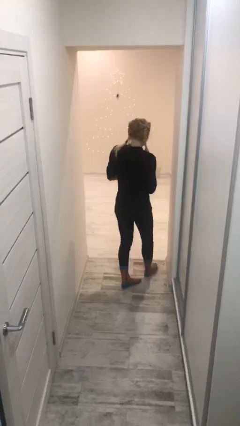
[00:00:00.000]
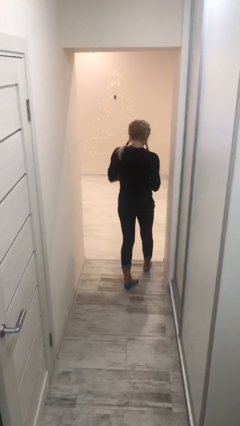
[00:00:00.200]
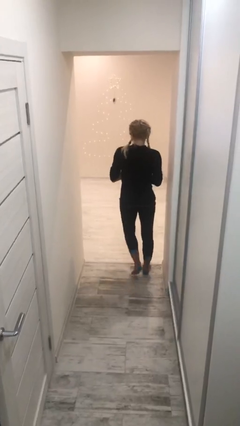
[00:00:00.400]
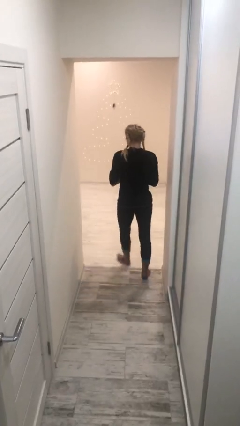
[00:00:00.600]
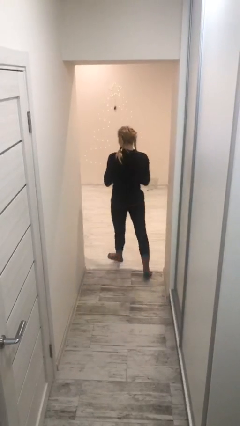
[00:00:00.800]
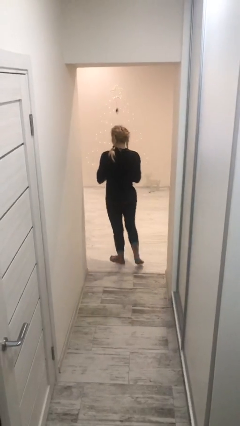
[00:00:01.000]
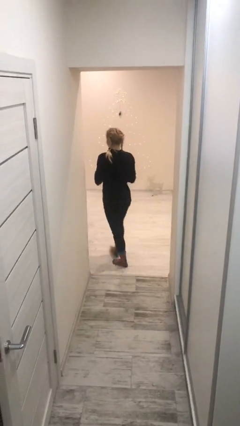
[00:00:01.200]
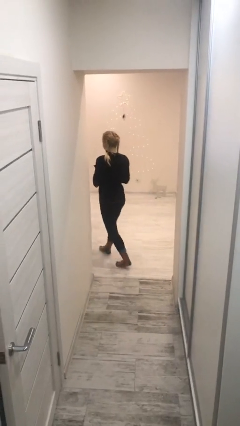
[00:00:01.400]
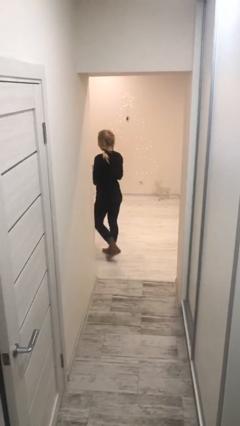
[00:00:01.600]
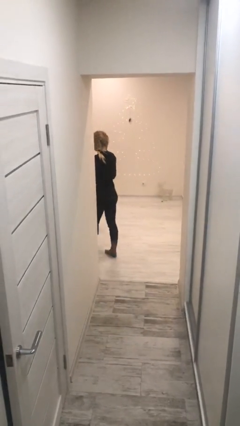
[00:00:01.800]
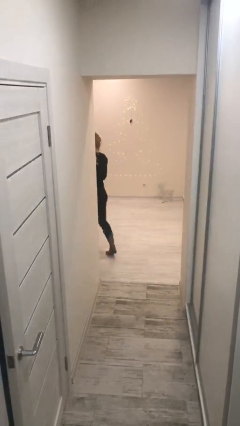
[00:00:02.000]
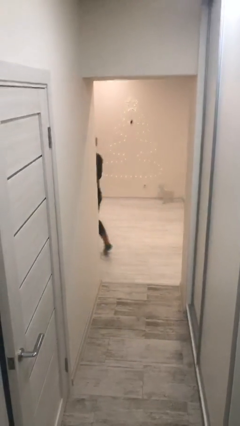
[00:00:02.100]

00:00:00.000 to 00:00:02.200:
person exits scene through structure

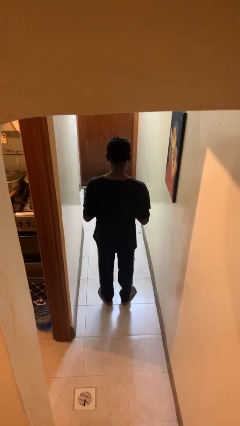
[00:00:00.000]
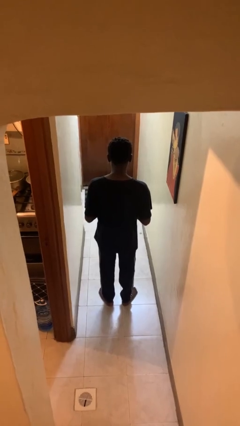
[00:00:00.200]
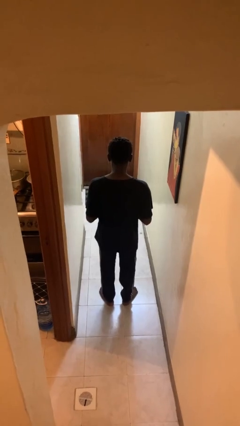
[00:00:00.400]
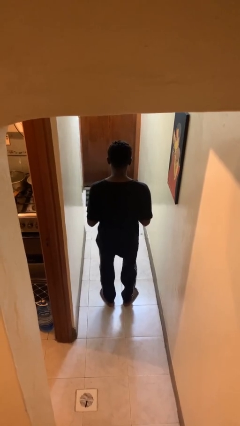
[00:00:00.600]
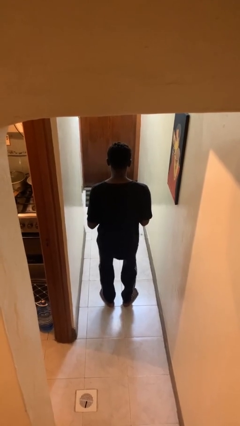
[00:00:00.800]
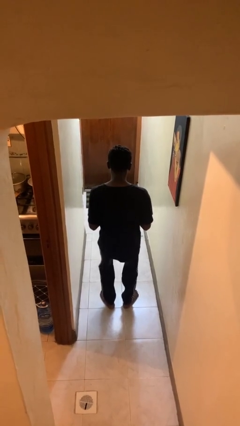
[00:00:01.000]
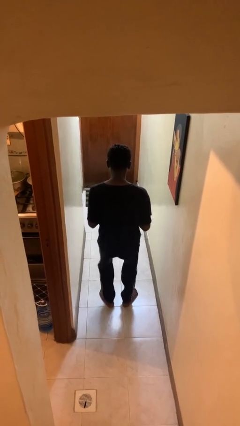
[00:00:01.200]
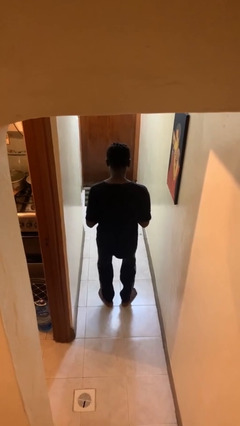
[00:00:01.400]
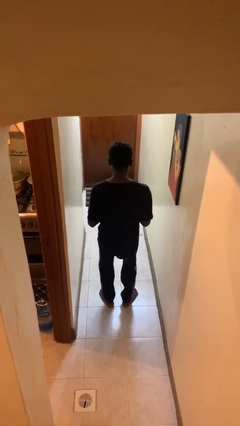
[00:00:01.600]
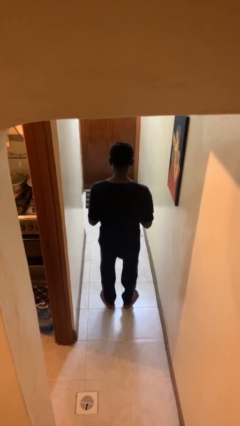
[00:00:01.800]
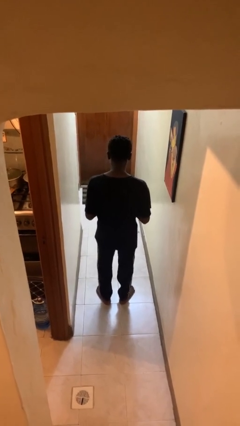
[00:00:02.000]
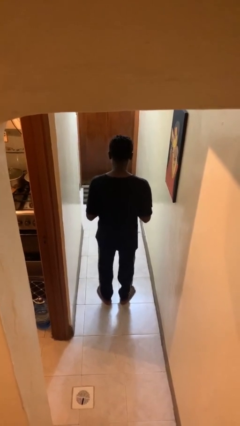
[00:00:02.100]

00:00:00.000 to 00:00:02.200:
person dances in place

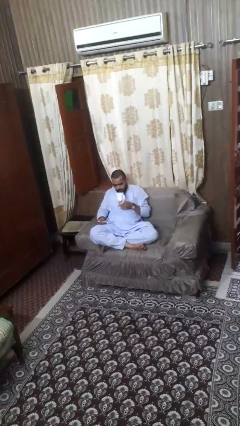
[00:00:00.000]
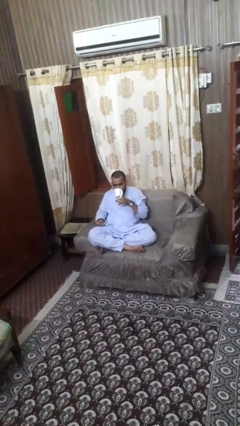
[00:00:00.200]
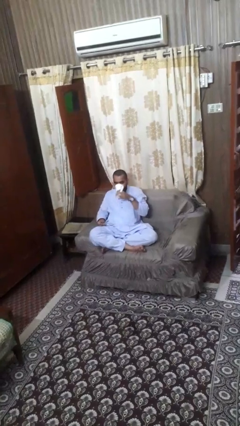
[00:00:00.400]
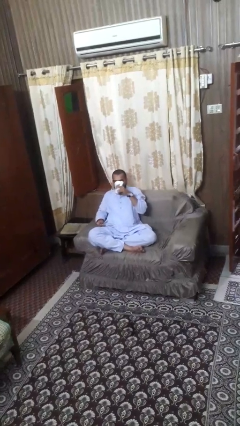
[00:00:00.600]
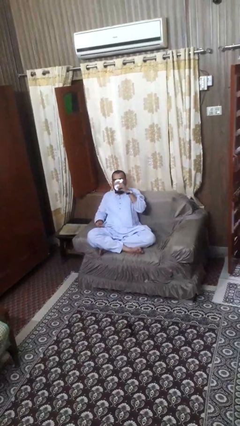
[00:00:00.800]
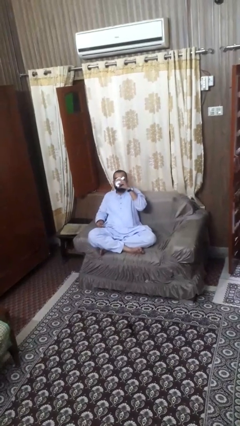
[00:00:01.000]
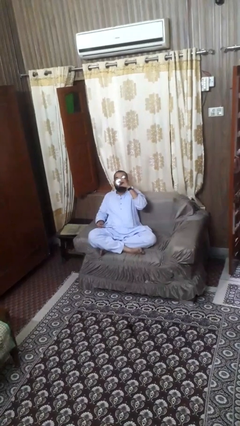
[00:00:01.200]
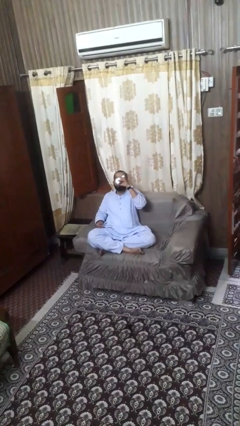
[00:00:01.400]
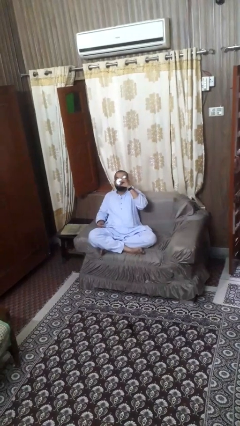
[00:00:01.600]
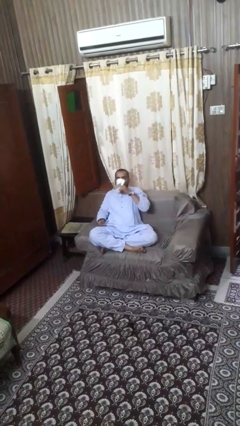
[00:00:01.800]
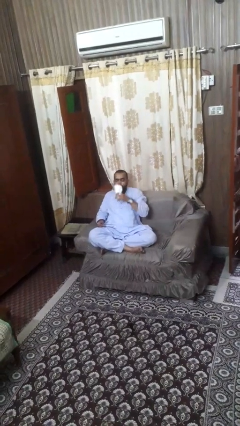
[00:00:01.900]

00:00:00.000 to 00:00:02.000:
person drinks from mug

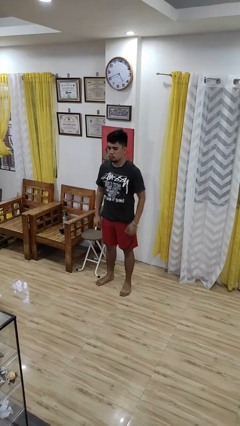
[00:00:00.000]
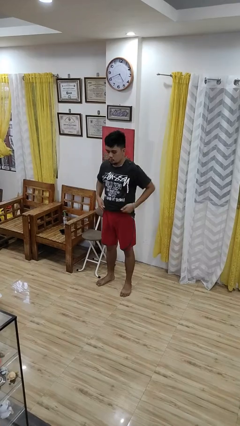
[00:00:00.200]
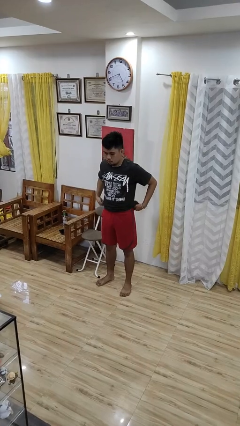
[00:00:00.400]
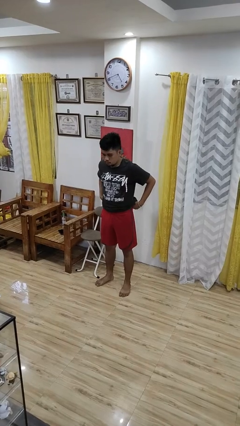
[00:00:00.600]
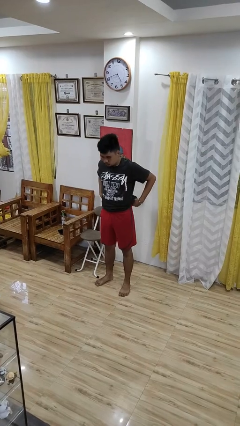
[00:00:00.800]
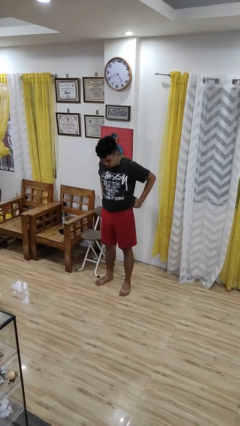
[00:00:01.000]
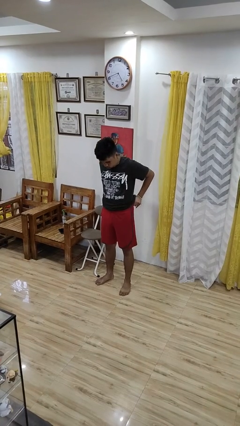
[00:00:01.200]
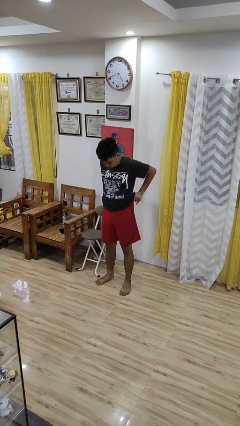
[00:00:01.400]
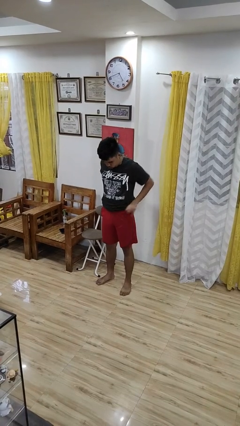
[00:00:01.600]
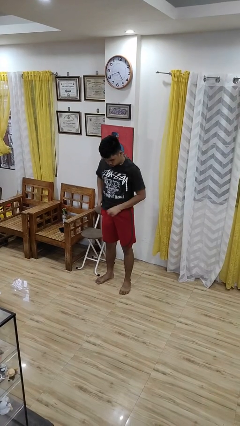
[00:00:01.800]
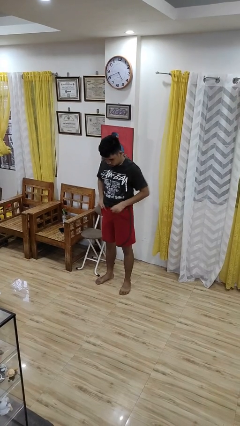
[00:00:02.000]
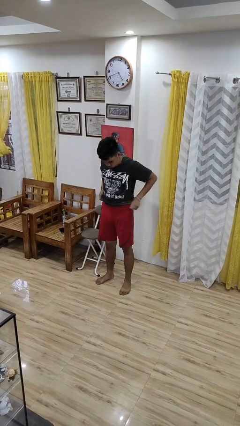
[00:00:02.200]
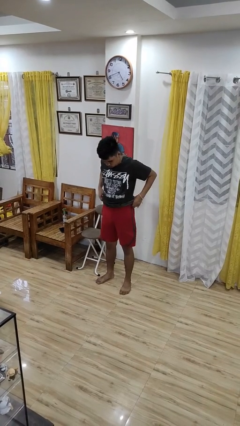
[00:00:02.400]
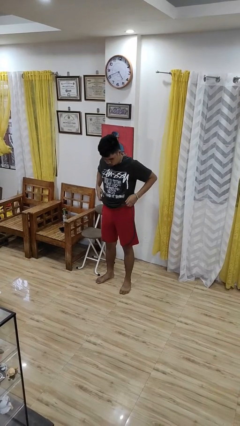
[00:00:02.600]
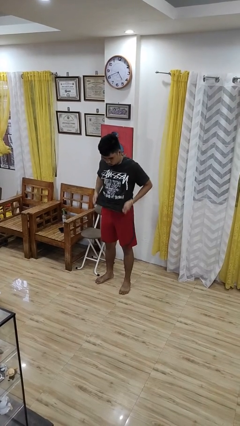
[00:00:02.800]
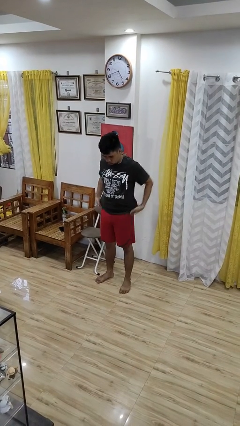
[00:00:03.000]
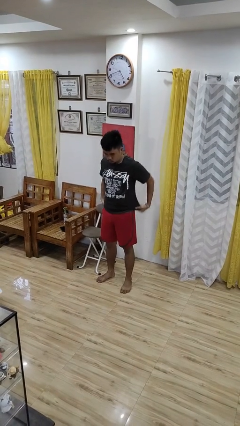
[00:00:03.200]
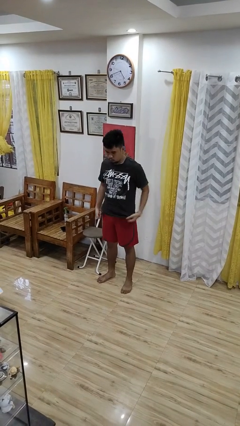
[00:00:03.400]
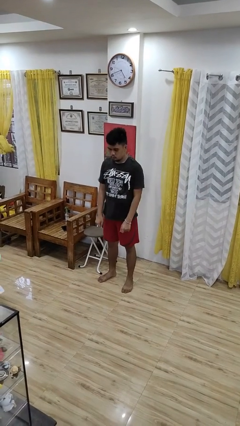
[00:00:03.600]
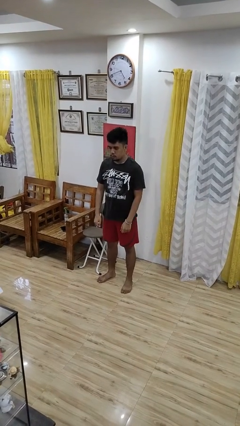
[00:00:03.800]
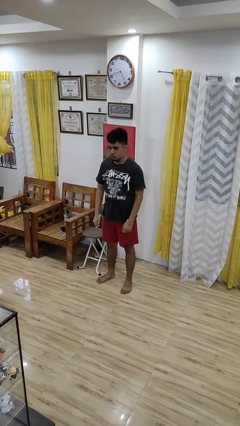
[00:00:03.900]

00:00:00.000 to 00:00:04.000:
person hikes up pants

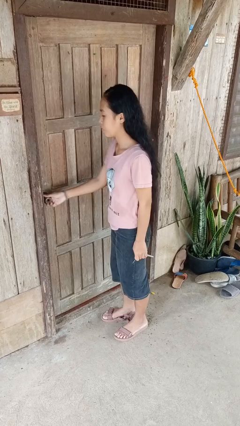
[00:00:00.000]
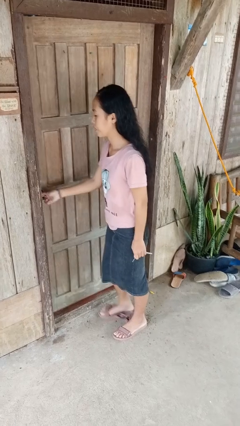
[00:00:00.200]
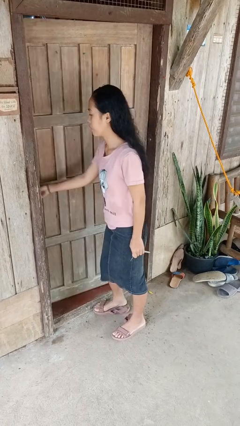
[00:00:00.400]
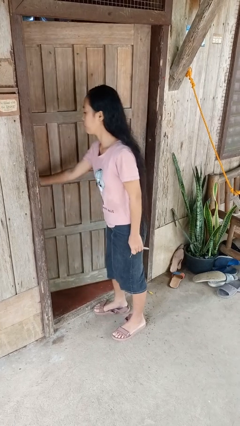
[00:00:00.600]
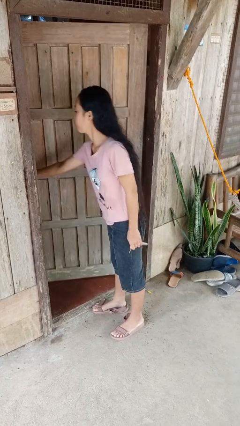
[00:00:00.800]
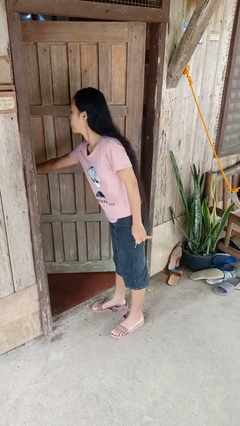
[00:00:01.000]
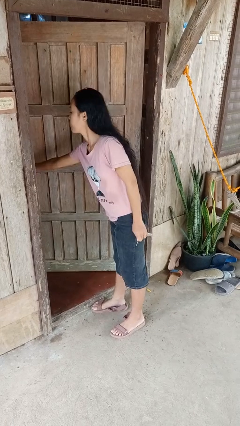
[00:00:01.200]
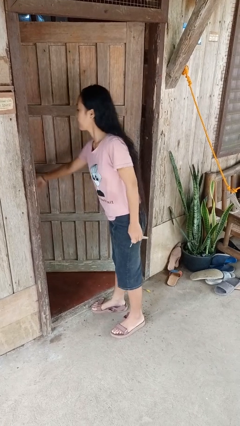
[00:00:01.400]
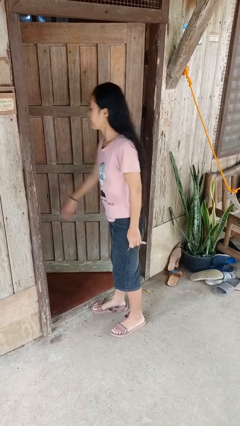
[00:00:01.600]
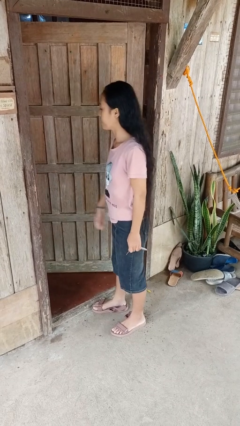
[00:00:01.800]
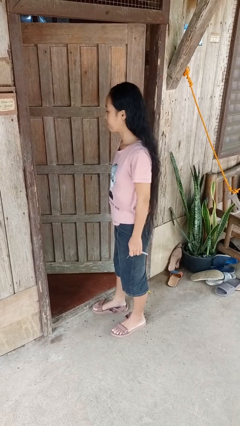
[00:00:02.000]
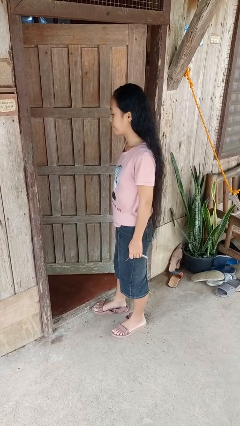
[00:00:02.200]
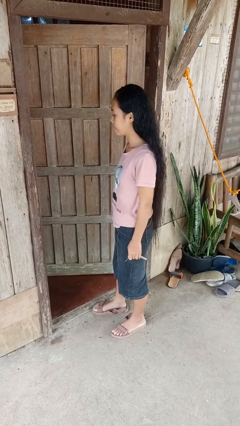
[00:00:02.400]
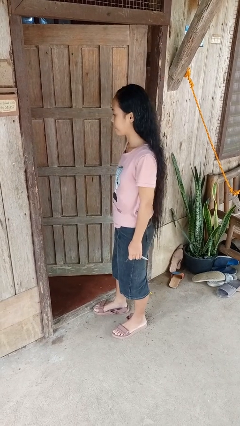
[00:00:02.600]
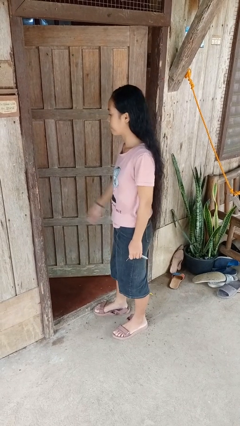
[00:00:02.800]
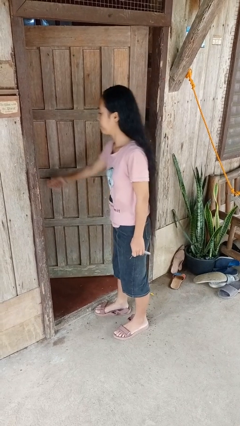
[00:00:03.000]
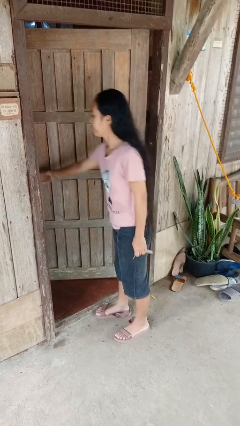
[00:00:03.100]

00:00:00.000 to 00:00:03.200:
person opens facility door

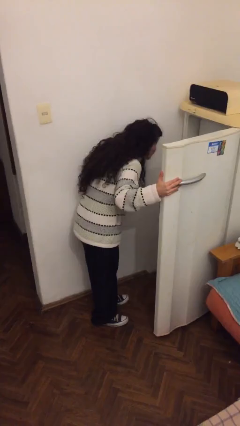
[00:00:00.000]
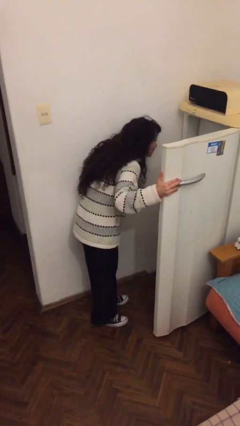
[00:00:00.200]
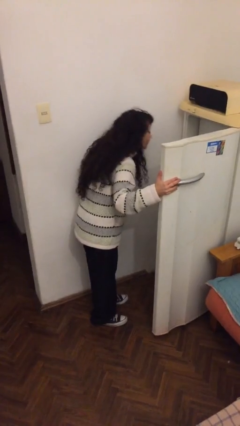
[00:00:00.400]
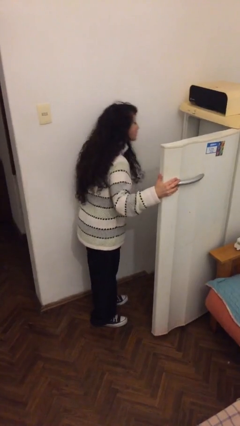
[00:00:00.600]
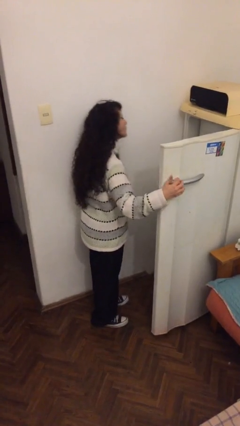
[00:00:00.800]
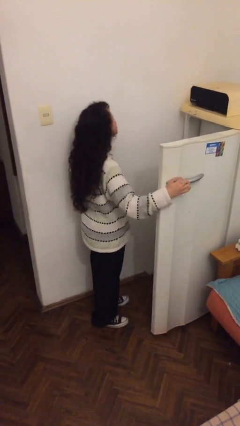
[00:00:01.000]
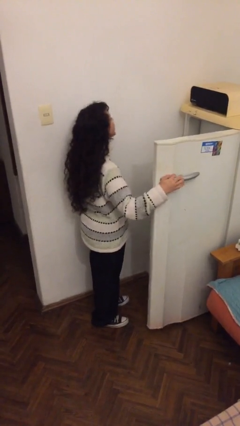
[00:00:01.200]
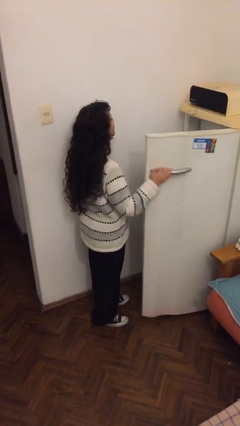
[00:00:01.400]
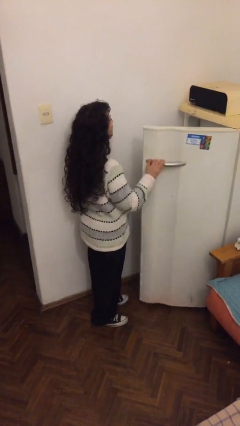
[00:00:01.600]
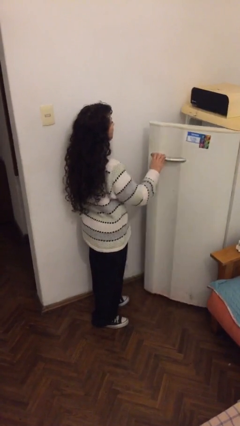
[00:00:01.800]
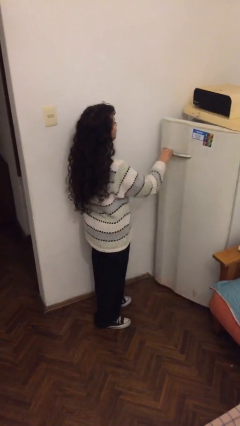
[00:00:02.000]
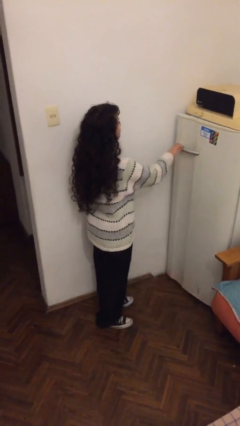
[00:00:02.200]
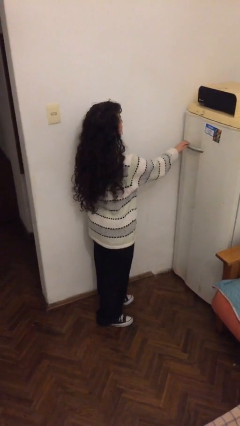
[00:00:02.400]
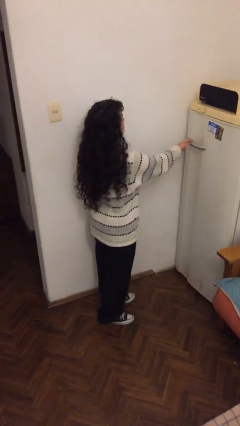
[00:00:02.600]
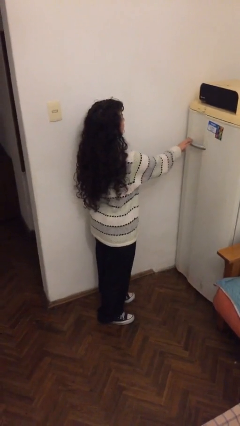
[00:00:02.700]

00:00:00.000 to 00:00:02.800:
person closes refrigerator

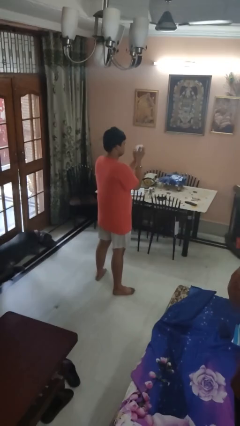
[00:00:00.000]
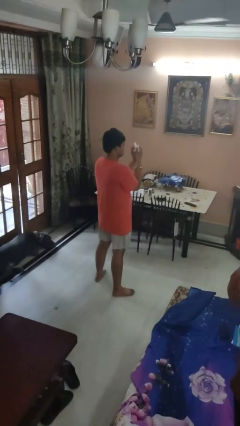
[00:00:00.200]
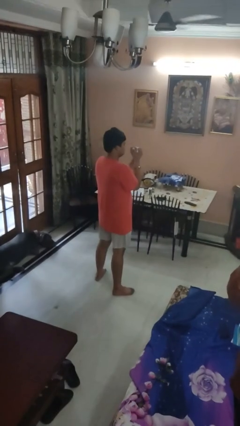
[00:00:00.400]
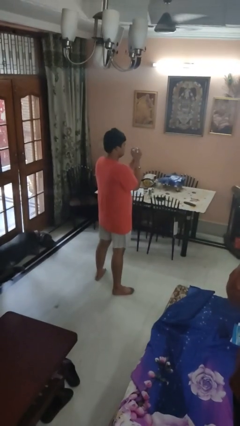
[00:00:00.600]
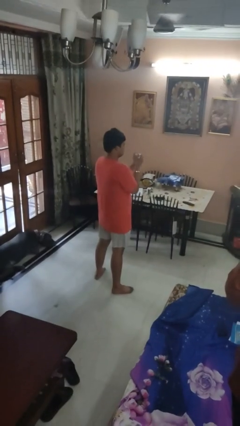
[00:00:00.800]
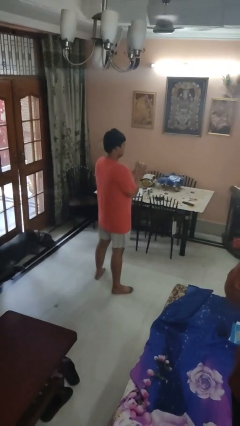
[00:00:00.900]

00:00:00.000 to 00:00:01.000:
person crumples paper
